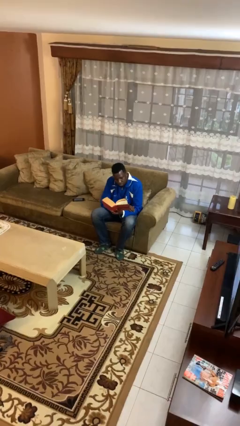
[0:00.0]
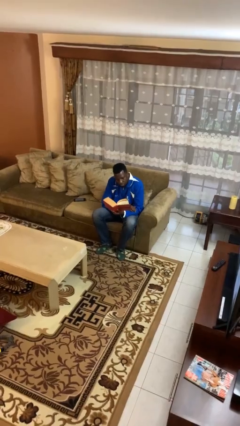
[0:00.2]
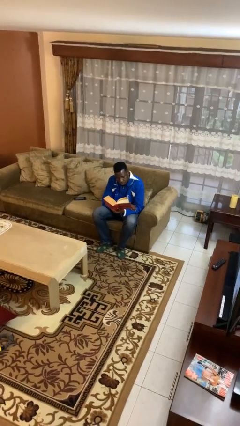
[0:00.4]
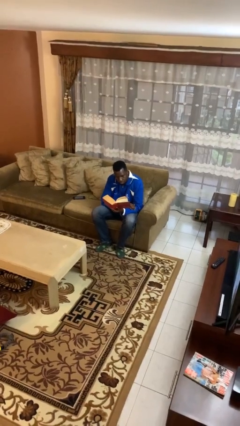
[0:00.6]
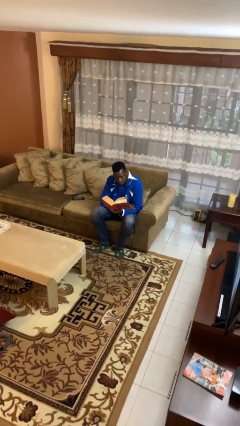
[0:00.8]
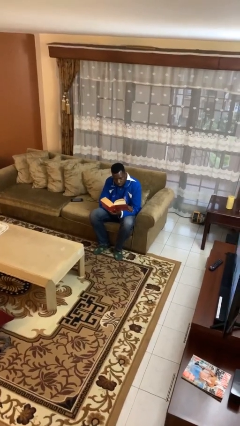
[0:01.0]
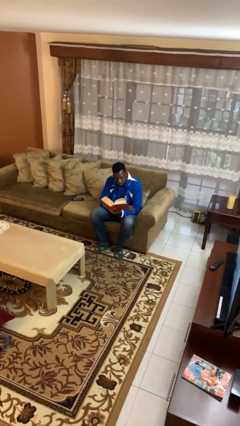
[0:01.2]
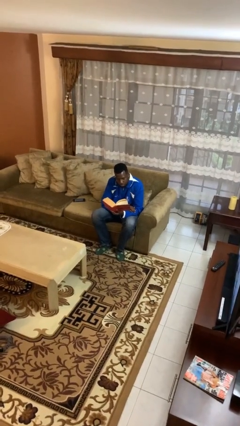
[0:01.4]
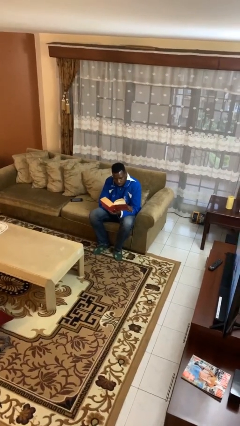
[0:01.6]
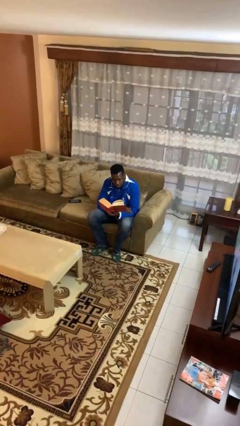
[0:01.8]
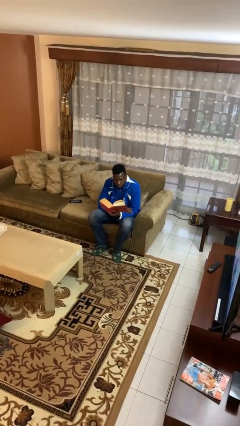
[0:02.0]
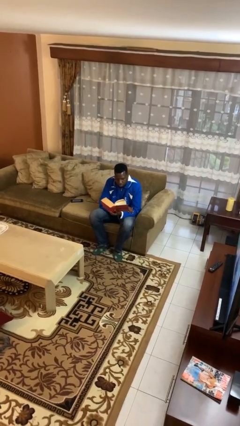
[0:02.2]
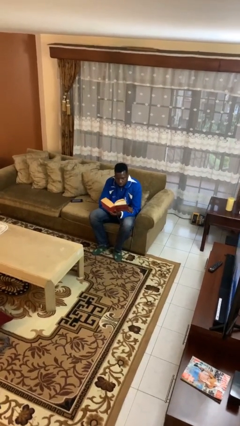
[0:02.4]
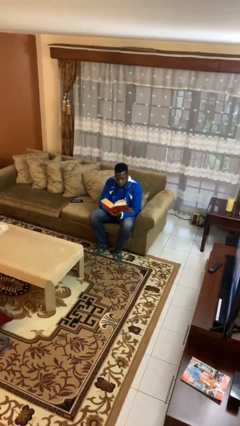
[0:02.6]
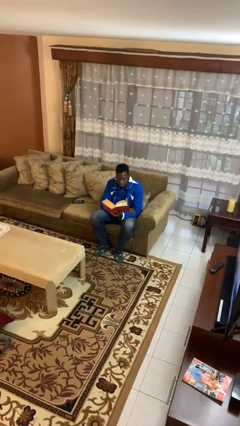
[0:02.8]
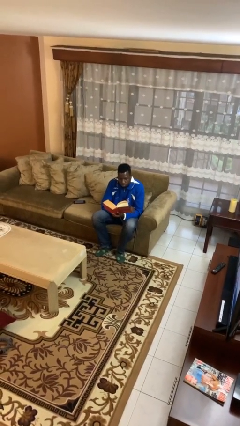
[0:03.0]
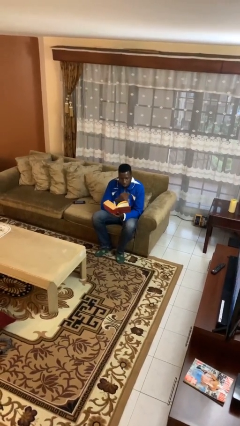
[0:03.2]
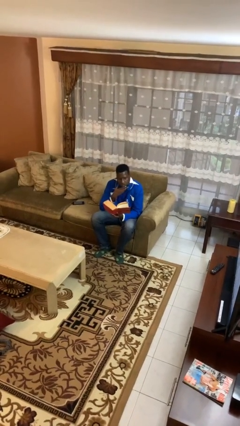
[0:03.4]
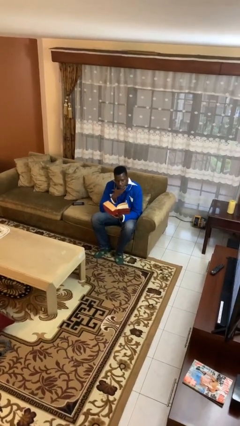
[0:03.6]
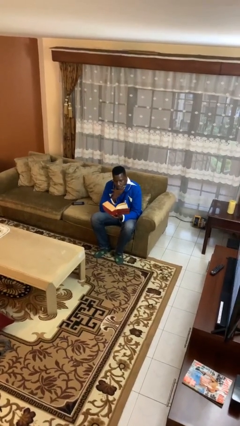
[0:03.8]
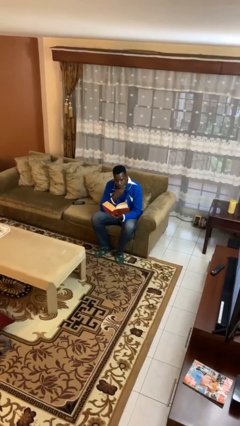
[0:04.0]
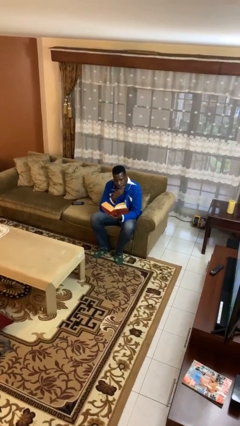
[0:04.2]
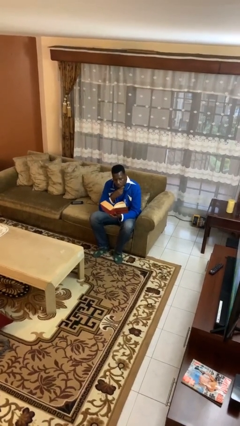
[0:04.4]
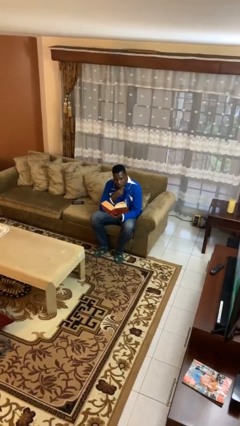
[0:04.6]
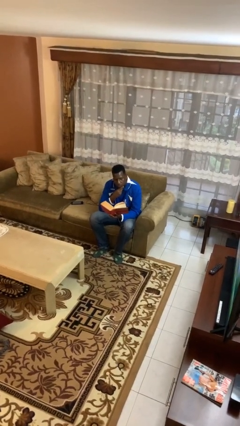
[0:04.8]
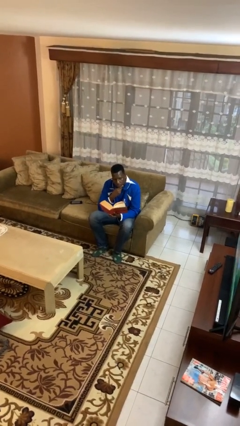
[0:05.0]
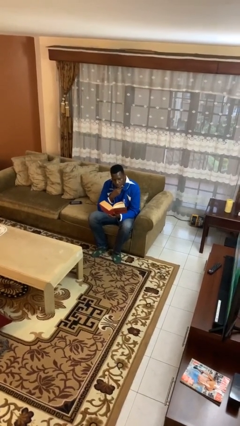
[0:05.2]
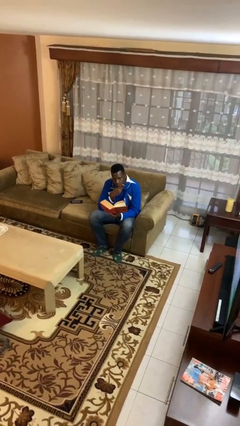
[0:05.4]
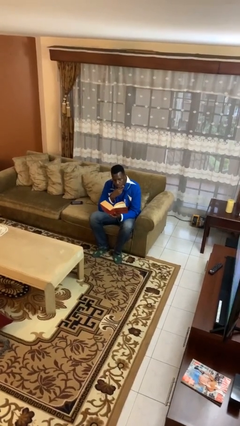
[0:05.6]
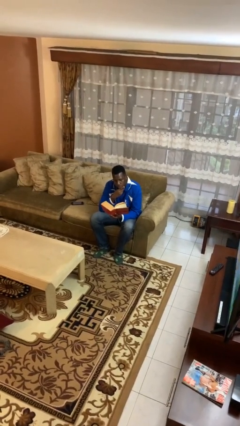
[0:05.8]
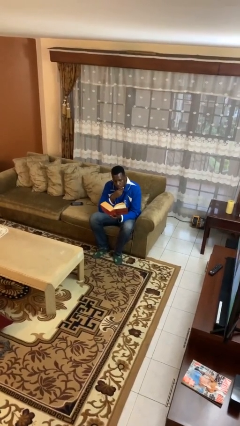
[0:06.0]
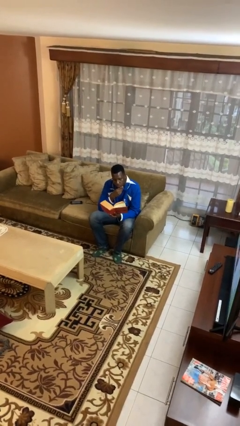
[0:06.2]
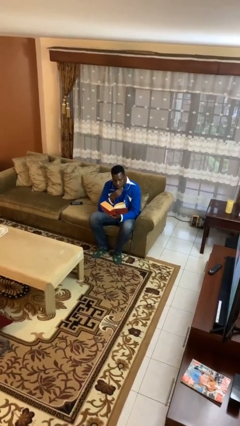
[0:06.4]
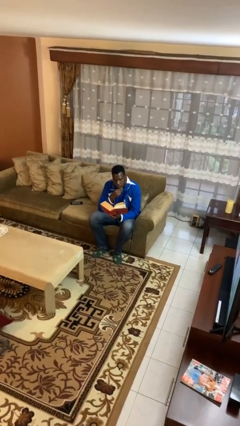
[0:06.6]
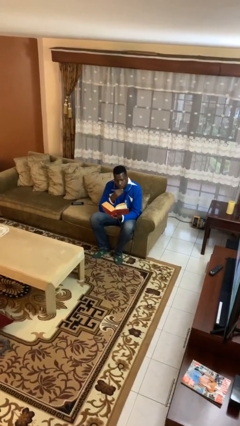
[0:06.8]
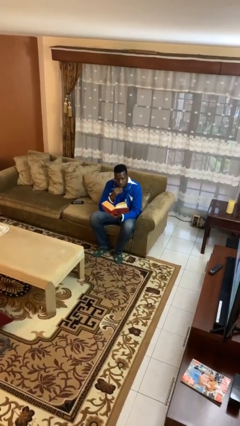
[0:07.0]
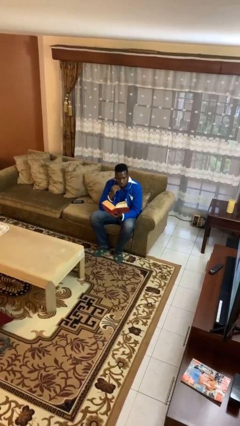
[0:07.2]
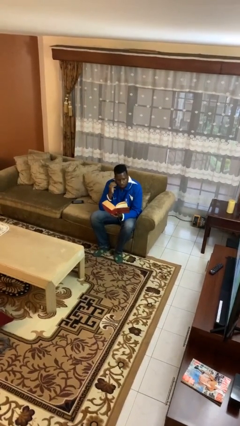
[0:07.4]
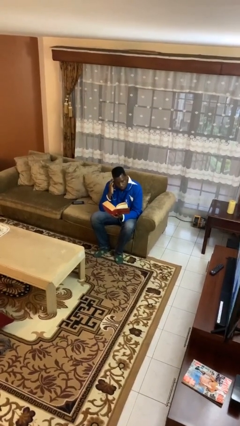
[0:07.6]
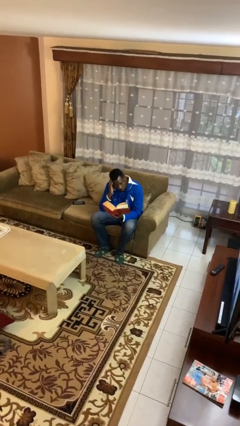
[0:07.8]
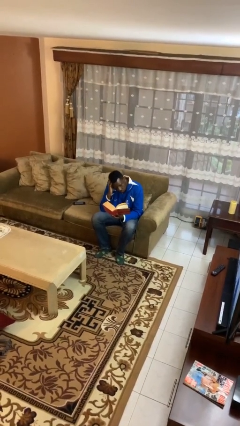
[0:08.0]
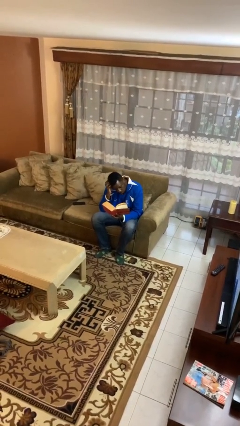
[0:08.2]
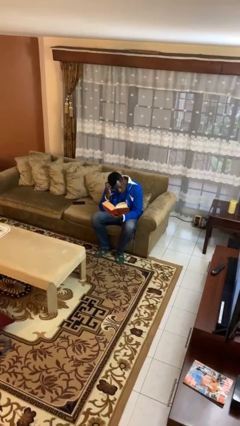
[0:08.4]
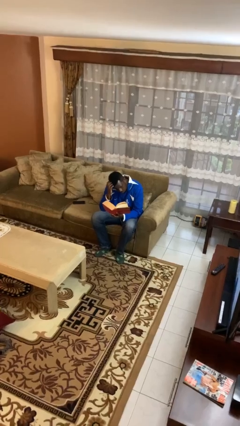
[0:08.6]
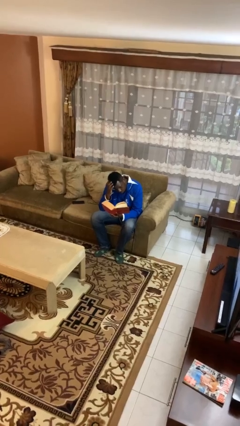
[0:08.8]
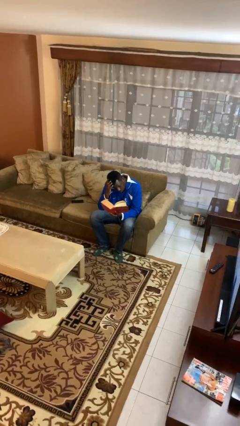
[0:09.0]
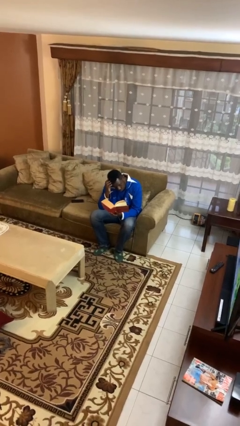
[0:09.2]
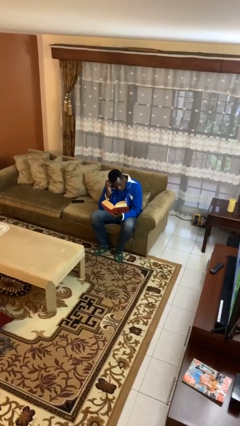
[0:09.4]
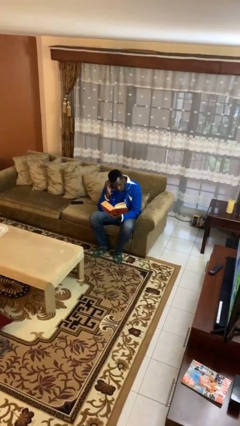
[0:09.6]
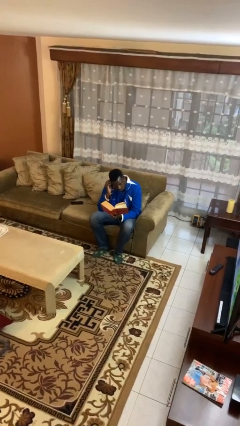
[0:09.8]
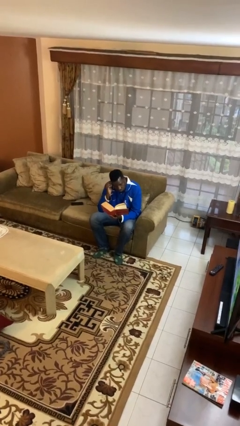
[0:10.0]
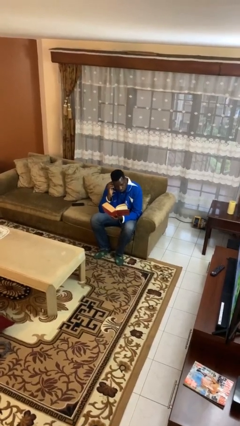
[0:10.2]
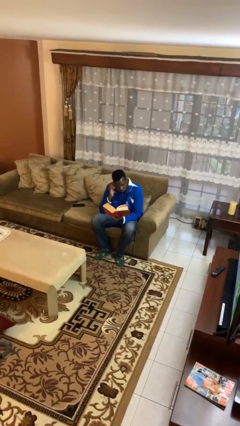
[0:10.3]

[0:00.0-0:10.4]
person reads document

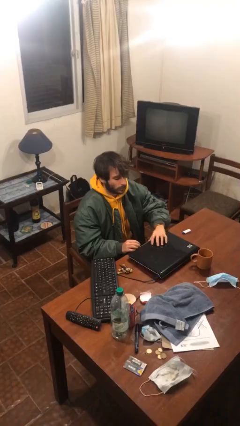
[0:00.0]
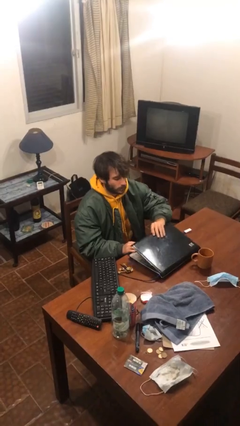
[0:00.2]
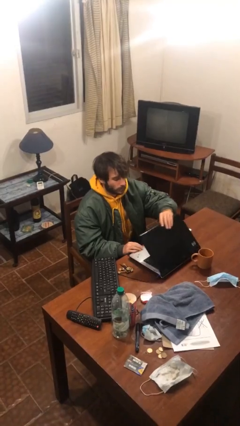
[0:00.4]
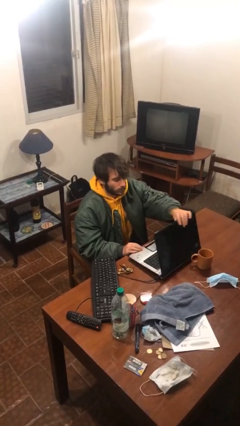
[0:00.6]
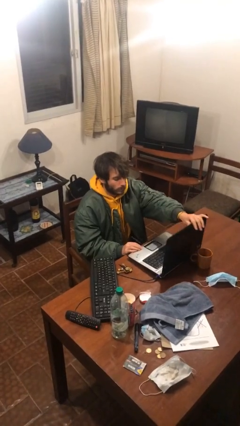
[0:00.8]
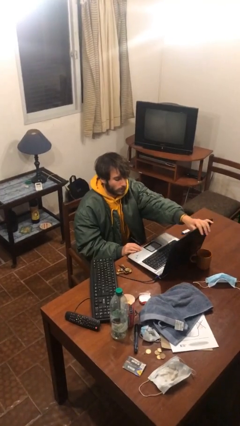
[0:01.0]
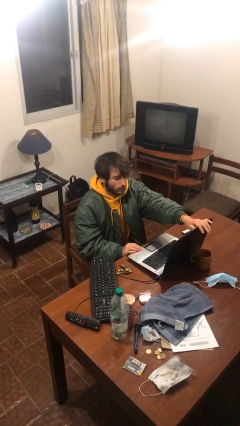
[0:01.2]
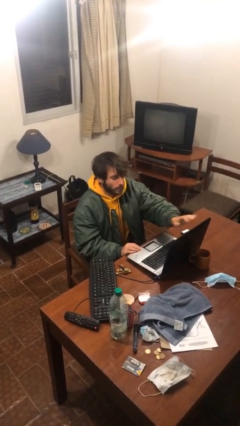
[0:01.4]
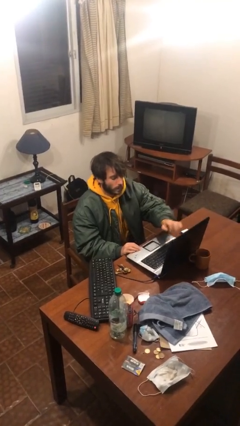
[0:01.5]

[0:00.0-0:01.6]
person interacts with laptop

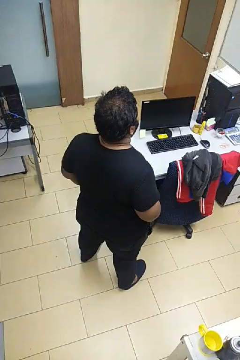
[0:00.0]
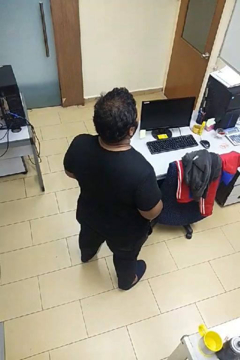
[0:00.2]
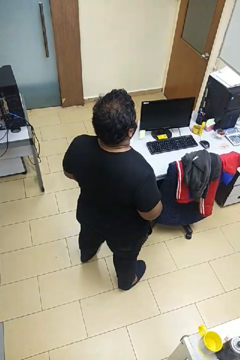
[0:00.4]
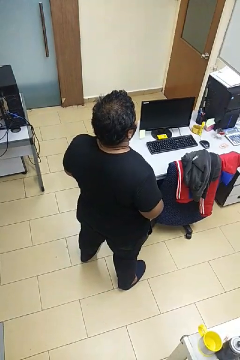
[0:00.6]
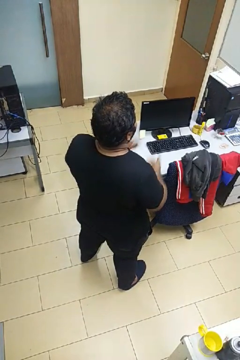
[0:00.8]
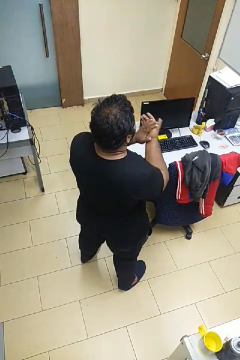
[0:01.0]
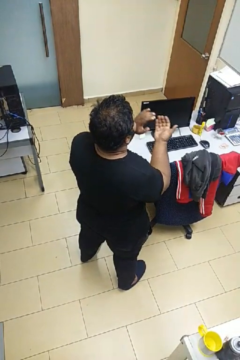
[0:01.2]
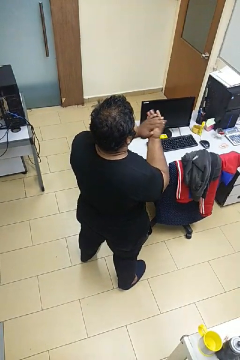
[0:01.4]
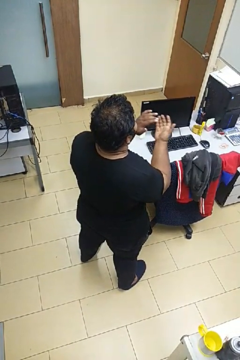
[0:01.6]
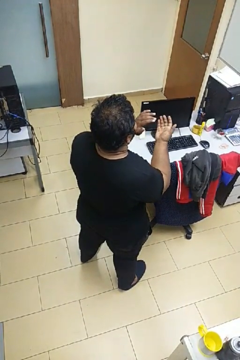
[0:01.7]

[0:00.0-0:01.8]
person claps hands

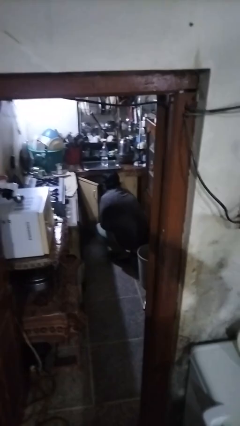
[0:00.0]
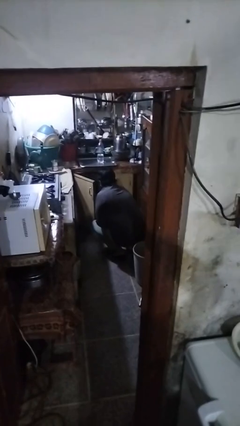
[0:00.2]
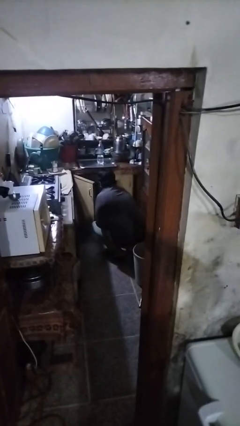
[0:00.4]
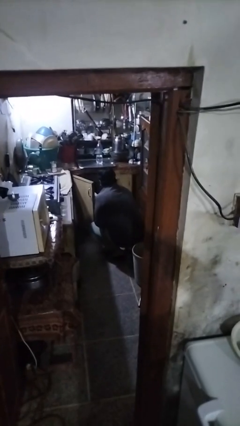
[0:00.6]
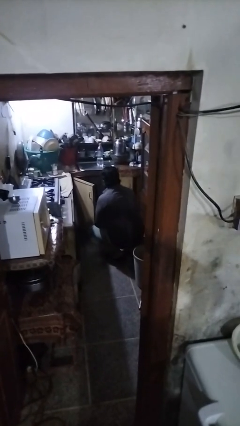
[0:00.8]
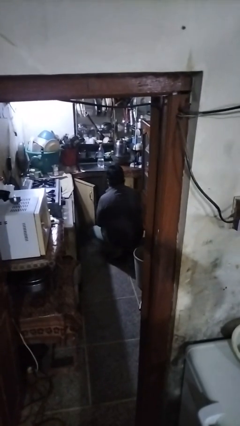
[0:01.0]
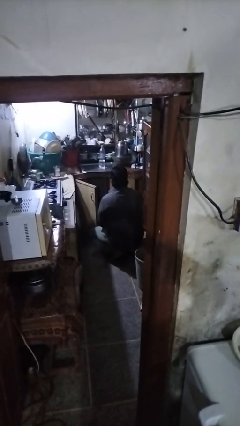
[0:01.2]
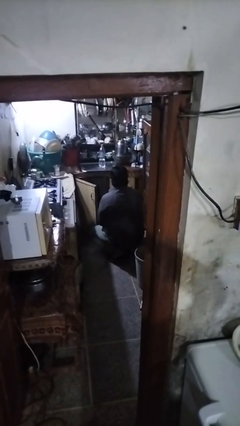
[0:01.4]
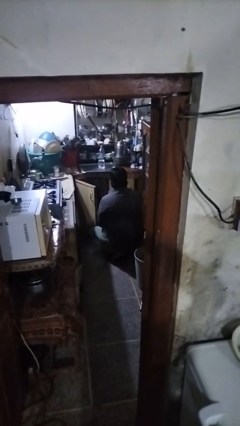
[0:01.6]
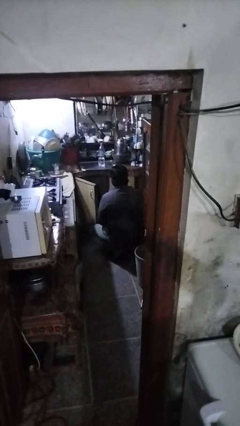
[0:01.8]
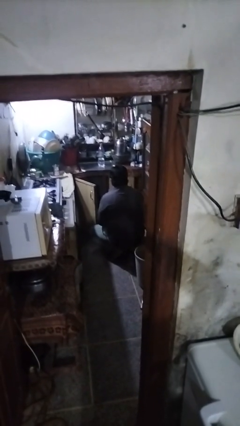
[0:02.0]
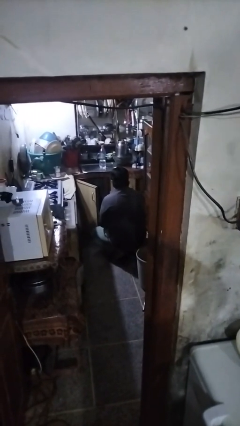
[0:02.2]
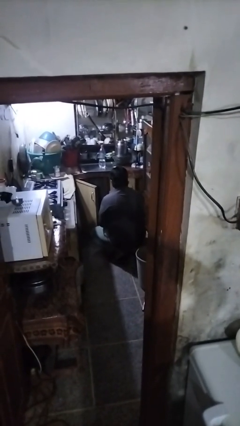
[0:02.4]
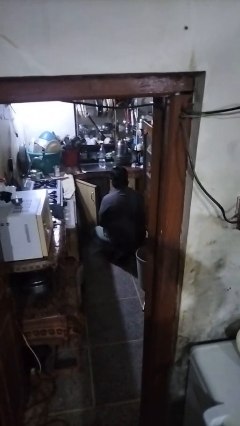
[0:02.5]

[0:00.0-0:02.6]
person takes object from cabinet

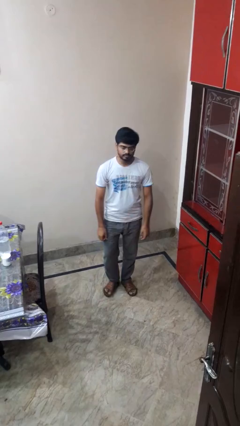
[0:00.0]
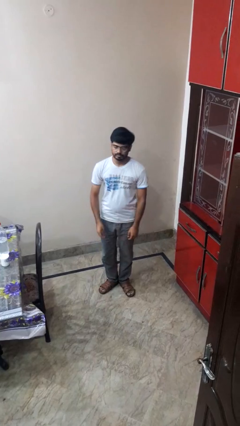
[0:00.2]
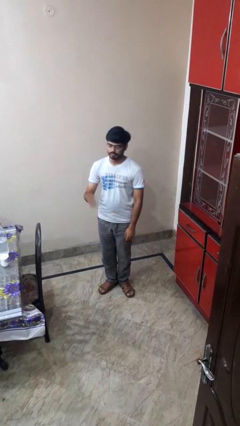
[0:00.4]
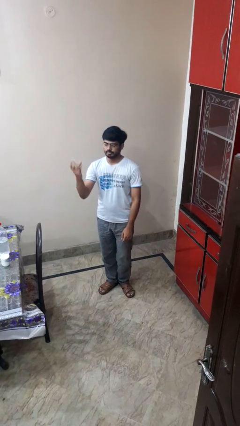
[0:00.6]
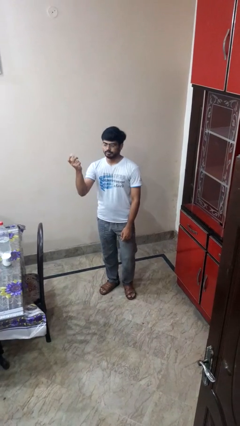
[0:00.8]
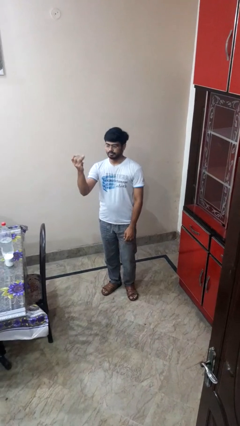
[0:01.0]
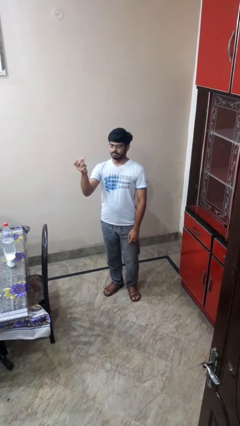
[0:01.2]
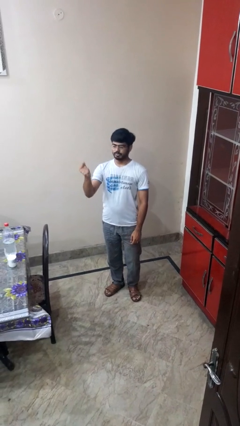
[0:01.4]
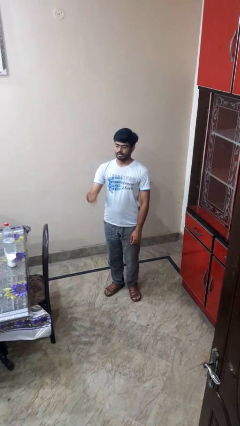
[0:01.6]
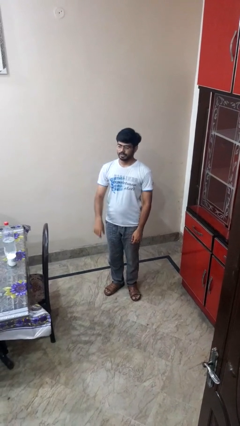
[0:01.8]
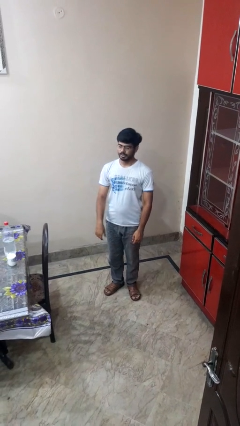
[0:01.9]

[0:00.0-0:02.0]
person snaps fingers
